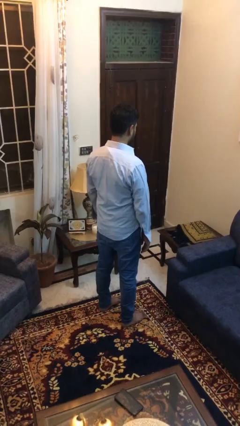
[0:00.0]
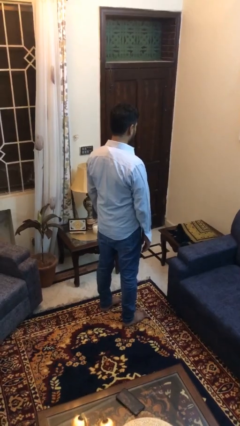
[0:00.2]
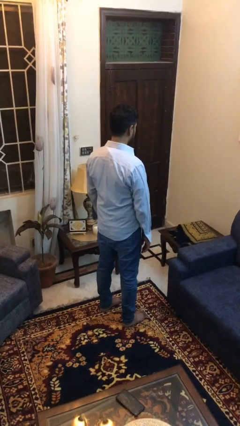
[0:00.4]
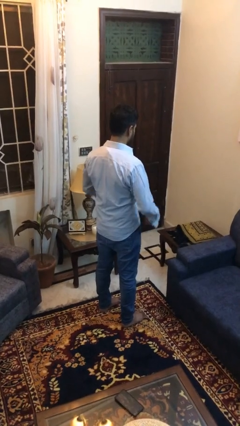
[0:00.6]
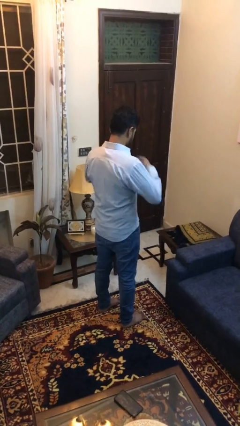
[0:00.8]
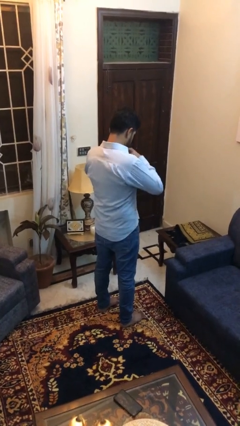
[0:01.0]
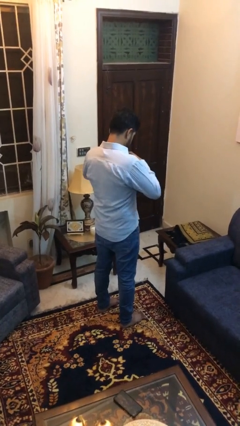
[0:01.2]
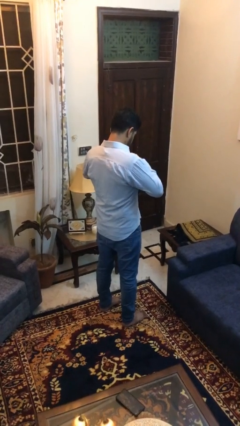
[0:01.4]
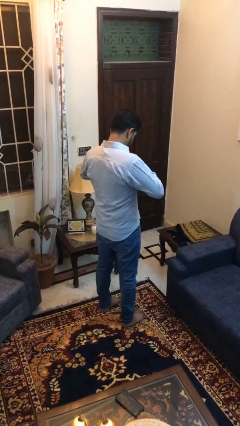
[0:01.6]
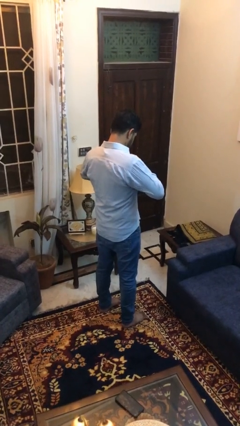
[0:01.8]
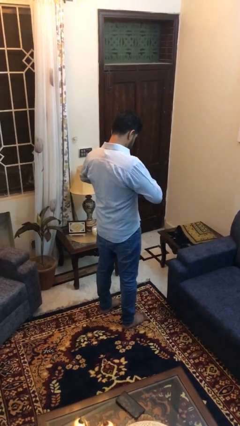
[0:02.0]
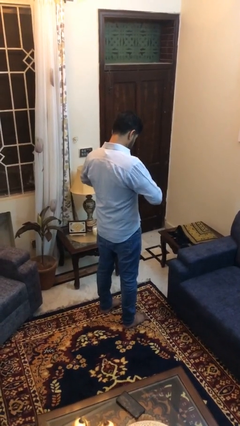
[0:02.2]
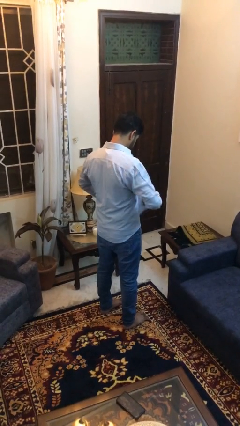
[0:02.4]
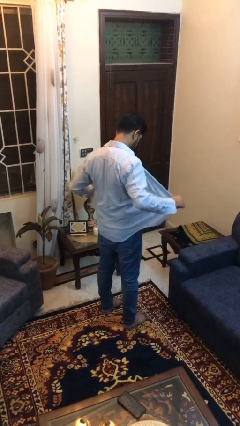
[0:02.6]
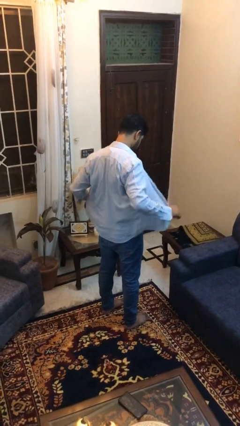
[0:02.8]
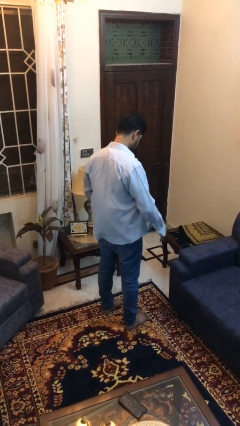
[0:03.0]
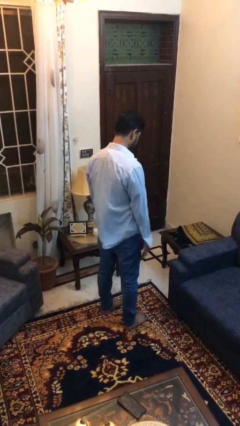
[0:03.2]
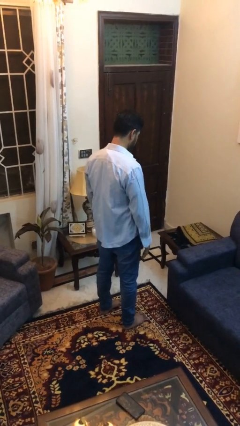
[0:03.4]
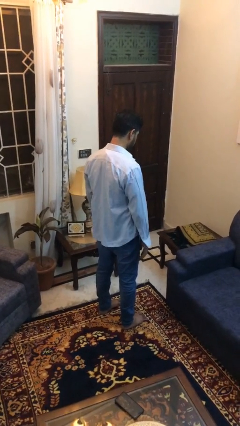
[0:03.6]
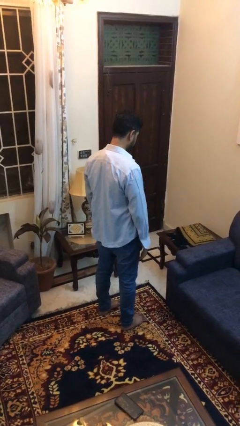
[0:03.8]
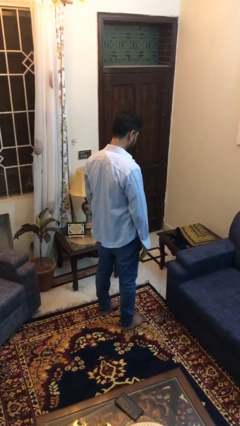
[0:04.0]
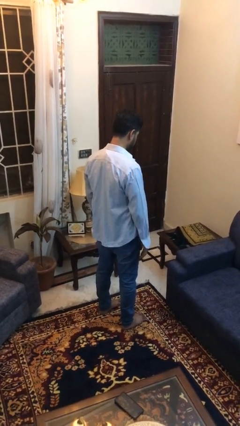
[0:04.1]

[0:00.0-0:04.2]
person unbuttons shirt

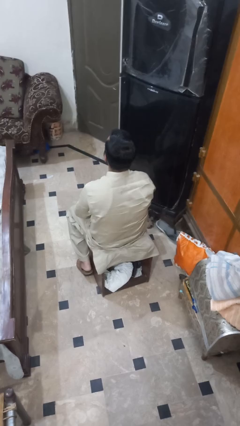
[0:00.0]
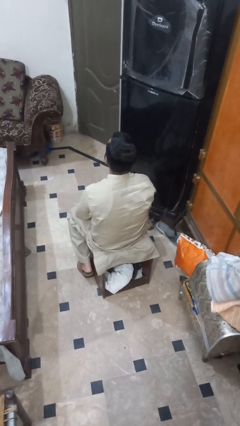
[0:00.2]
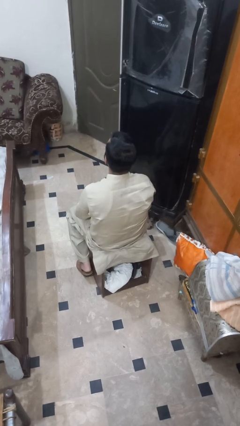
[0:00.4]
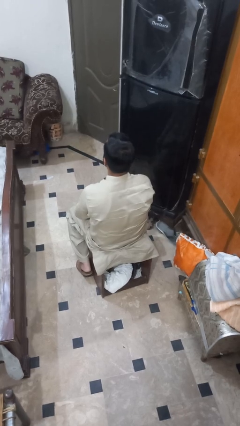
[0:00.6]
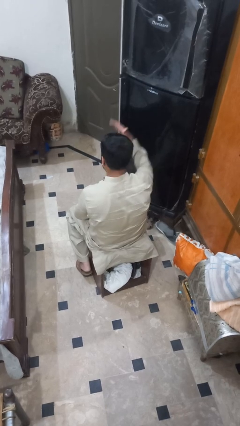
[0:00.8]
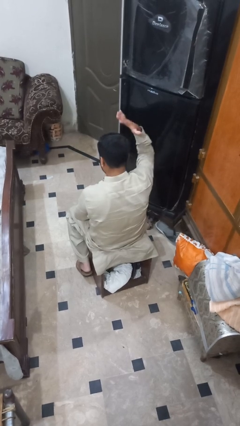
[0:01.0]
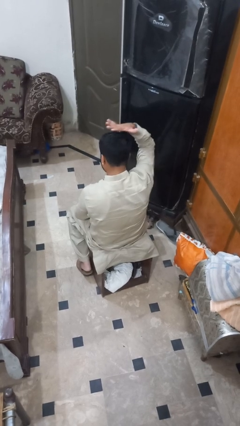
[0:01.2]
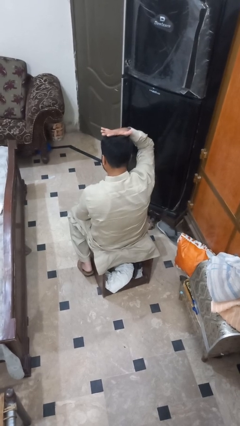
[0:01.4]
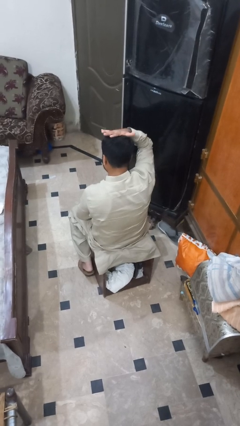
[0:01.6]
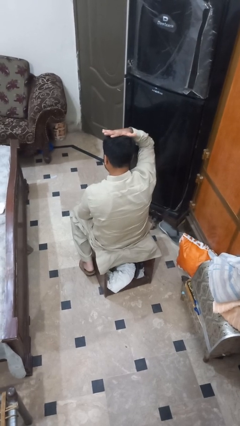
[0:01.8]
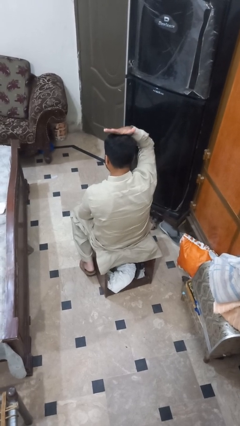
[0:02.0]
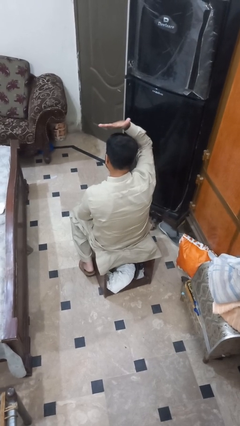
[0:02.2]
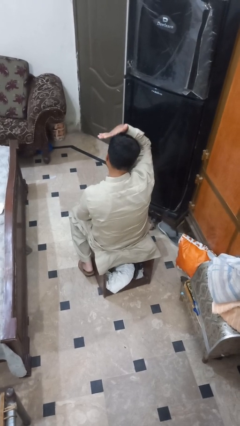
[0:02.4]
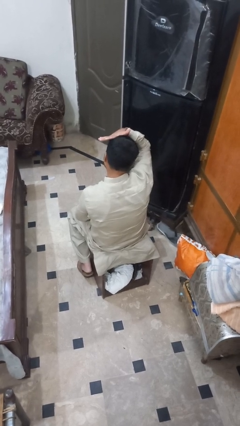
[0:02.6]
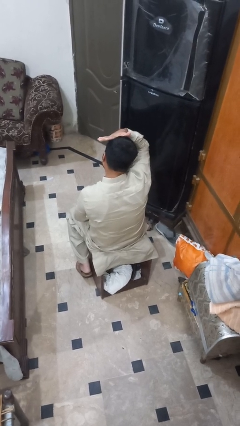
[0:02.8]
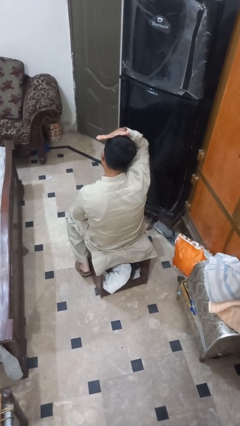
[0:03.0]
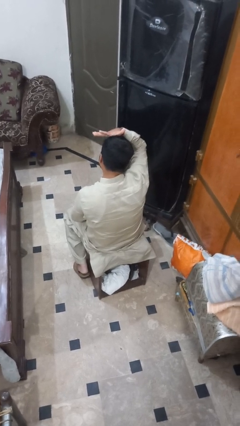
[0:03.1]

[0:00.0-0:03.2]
person pats head

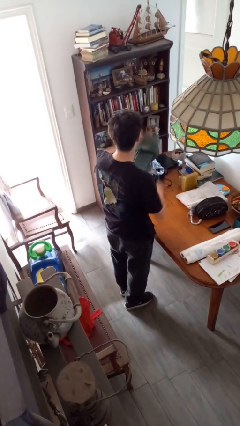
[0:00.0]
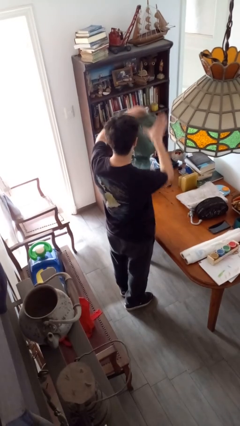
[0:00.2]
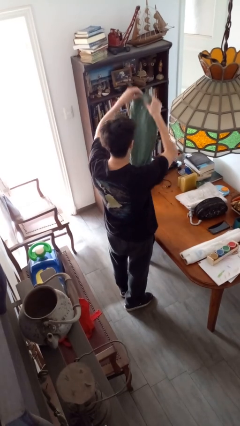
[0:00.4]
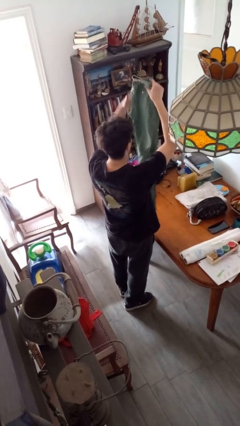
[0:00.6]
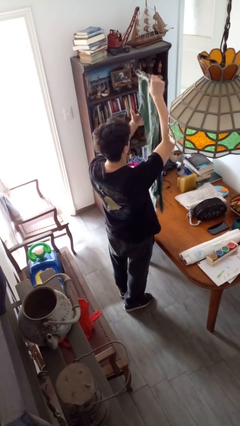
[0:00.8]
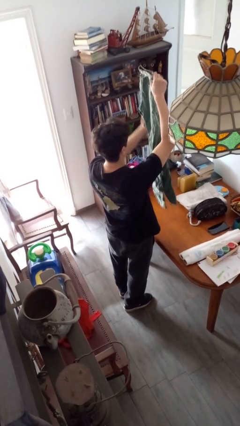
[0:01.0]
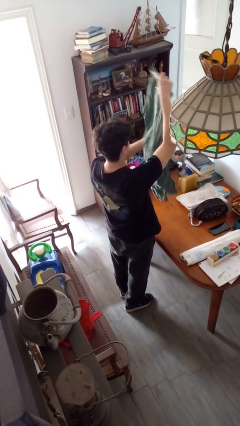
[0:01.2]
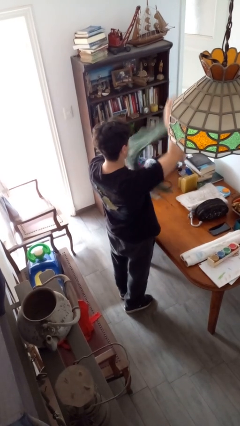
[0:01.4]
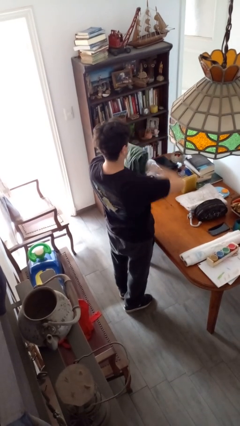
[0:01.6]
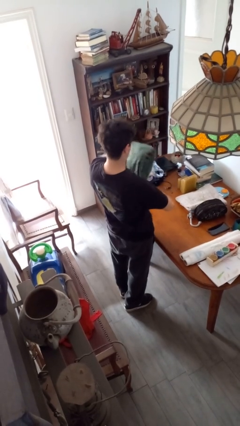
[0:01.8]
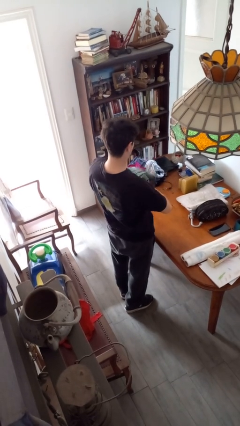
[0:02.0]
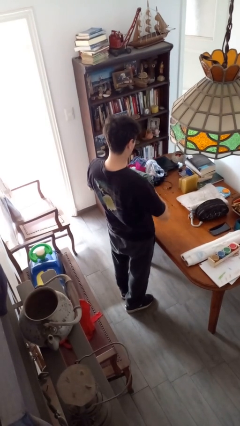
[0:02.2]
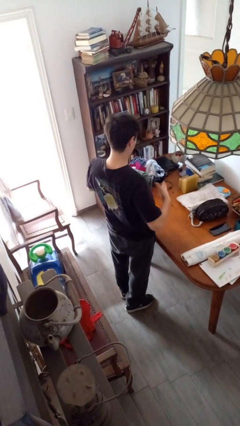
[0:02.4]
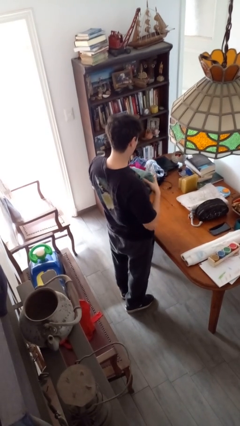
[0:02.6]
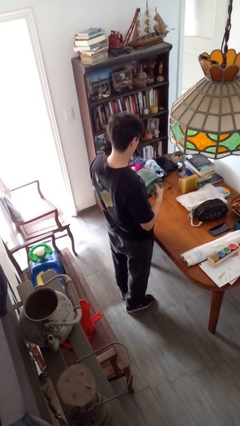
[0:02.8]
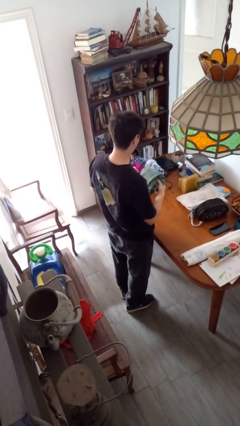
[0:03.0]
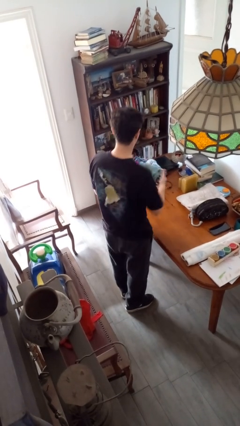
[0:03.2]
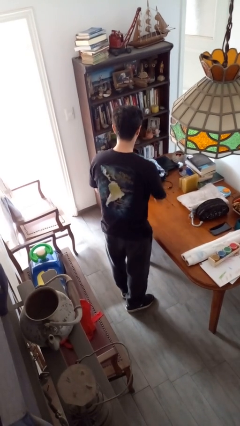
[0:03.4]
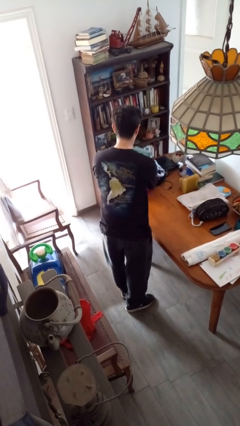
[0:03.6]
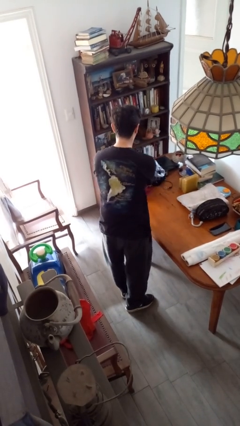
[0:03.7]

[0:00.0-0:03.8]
person folds shirt

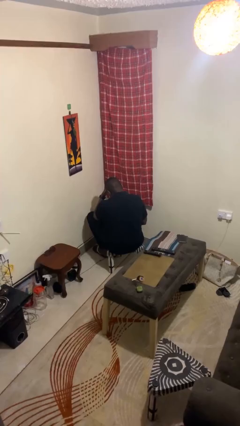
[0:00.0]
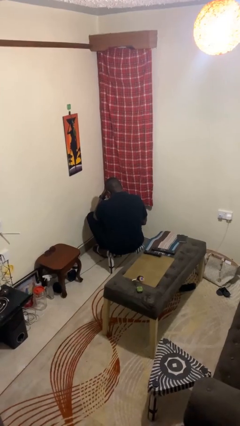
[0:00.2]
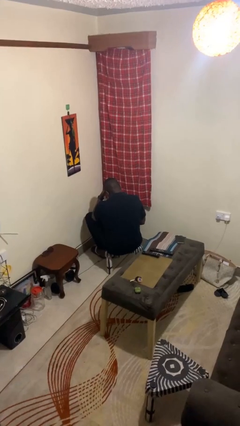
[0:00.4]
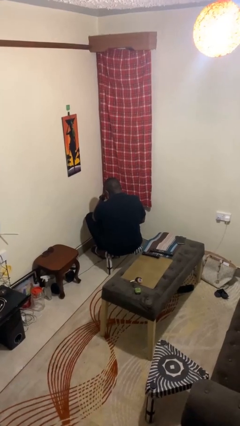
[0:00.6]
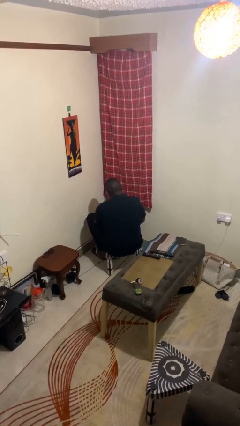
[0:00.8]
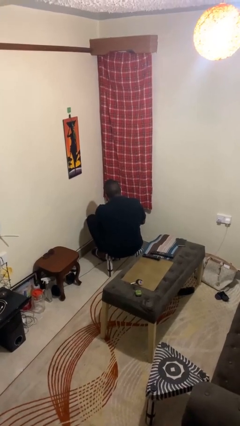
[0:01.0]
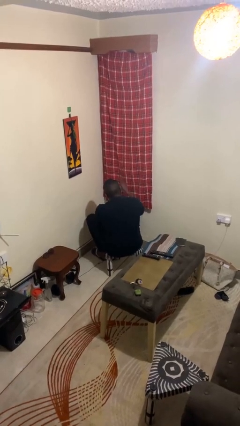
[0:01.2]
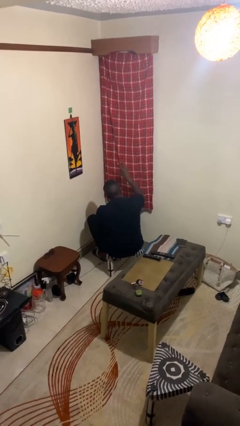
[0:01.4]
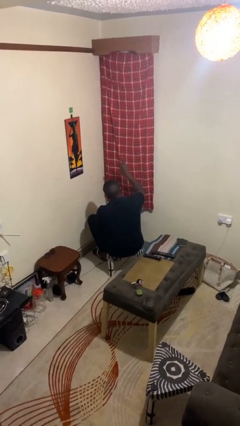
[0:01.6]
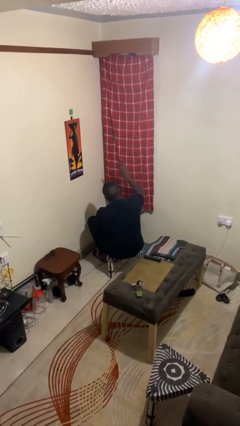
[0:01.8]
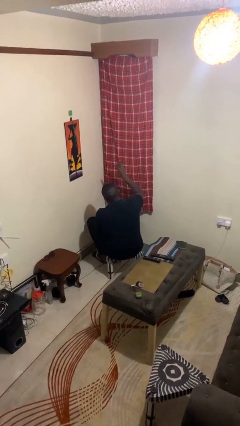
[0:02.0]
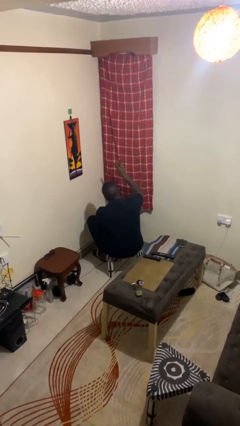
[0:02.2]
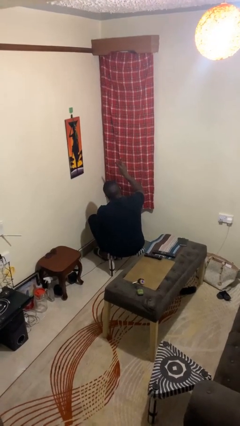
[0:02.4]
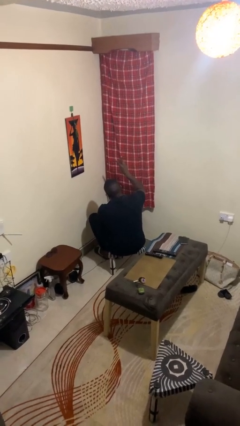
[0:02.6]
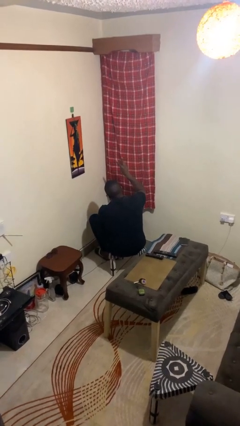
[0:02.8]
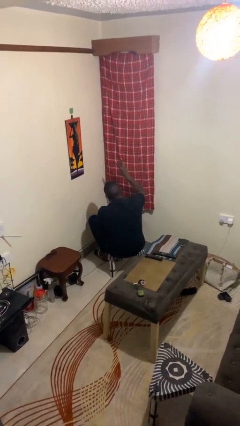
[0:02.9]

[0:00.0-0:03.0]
person gestures peace

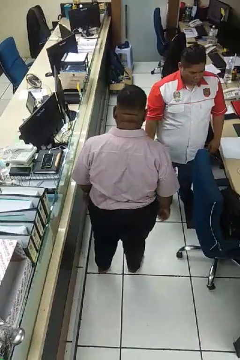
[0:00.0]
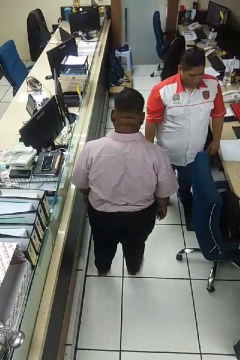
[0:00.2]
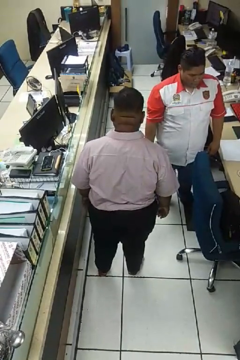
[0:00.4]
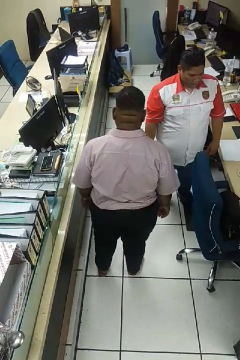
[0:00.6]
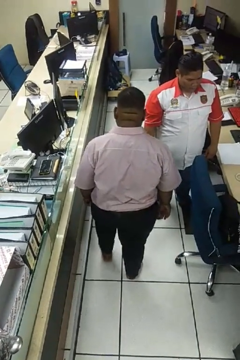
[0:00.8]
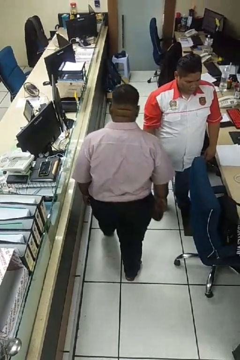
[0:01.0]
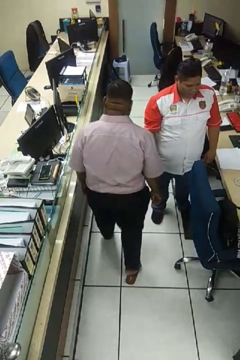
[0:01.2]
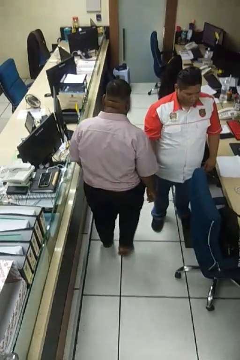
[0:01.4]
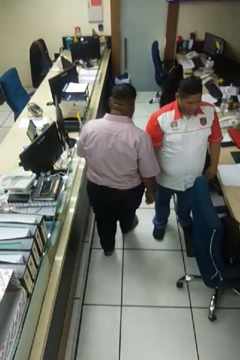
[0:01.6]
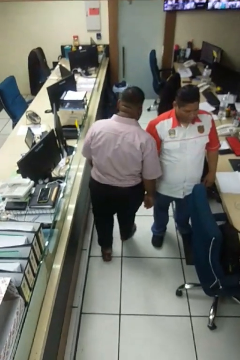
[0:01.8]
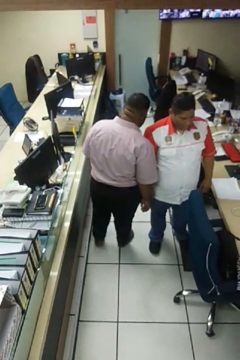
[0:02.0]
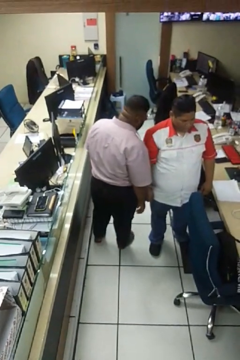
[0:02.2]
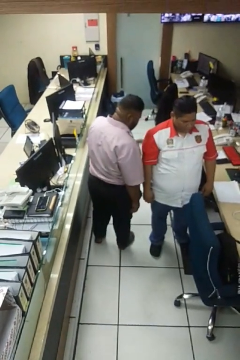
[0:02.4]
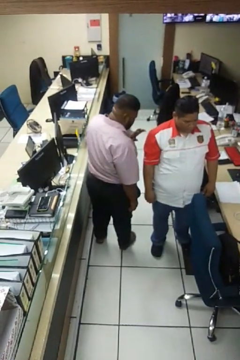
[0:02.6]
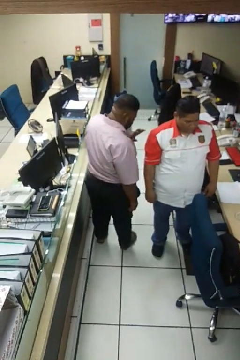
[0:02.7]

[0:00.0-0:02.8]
person bumps into person

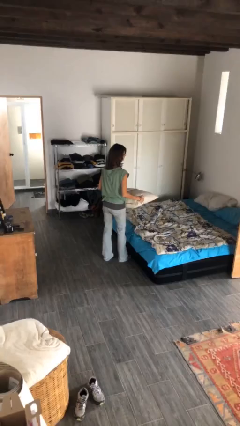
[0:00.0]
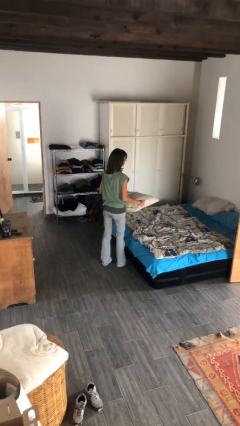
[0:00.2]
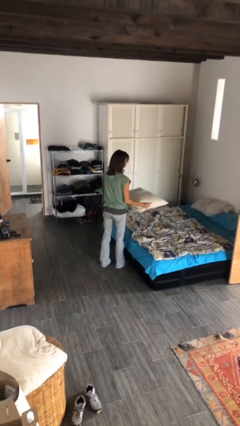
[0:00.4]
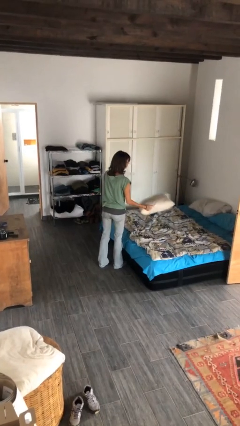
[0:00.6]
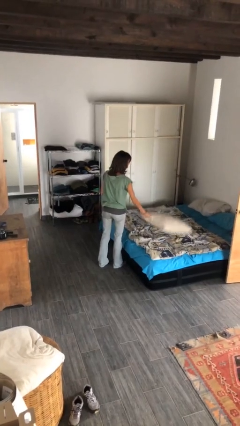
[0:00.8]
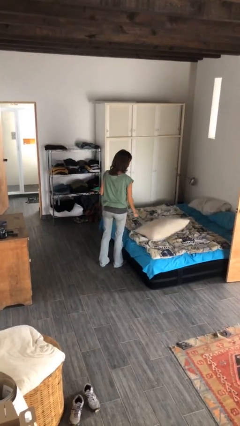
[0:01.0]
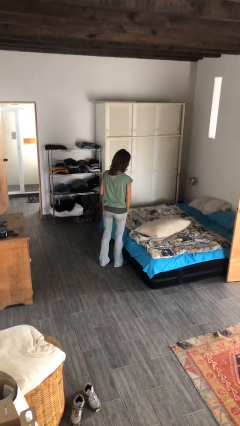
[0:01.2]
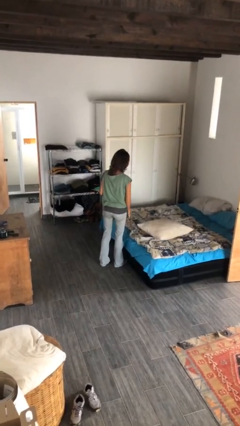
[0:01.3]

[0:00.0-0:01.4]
person puts down object on bed
